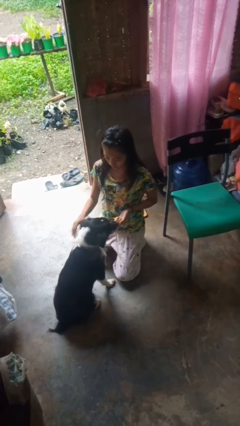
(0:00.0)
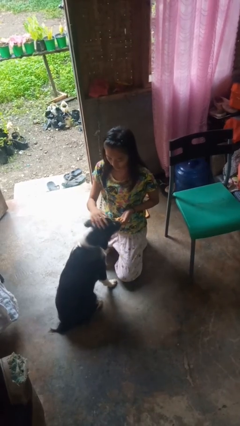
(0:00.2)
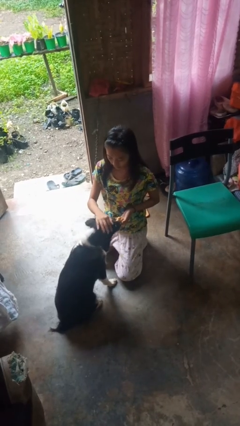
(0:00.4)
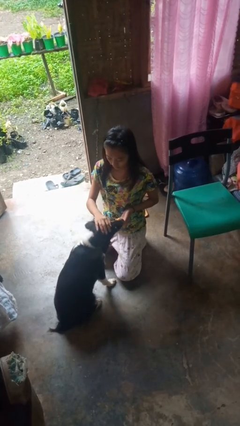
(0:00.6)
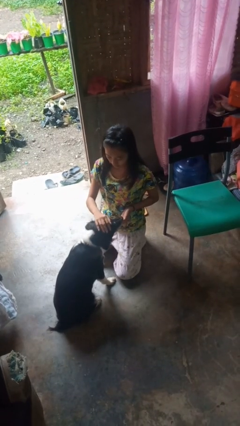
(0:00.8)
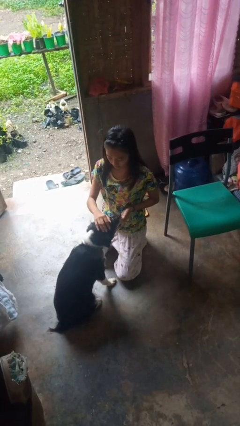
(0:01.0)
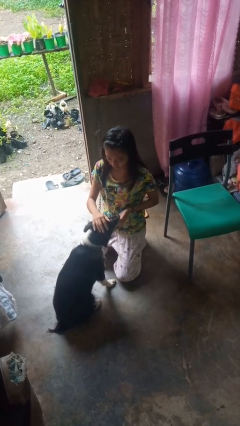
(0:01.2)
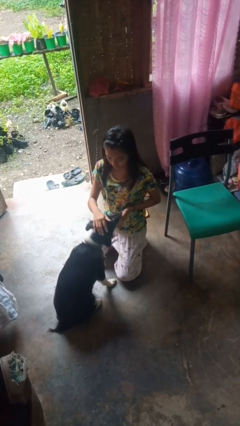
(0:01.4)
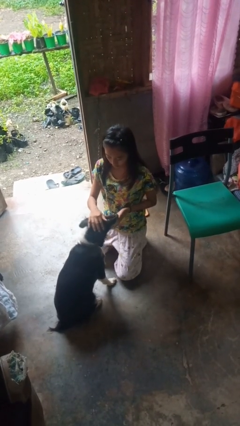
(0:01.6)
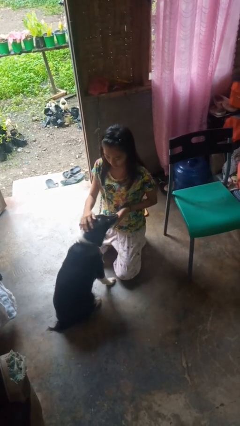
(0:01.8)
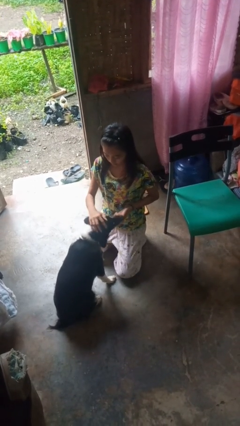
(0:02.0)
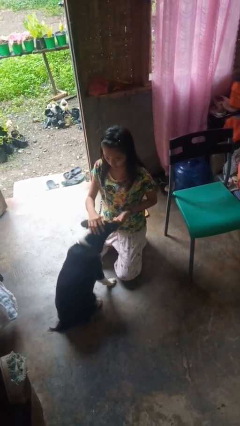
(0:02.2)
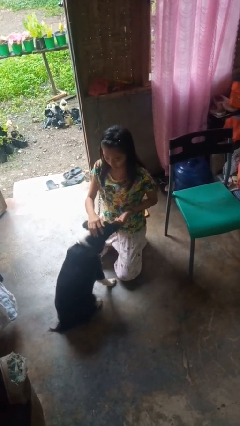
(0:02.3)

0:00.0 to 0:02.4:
person pets dog

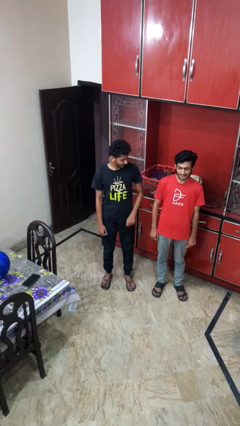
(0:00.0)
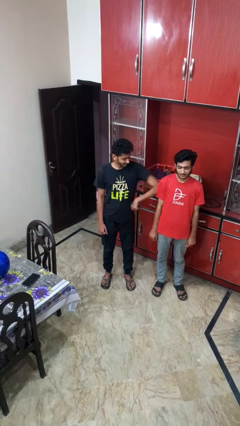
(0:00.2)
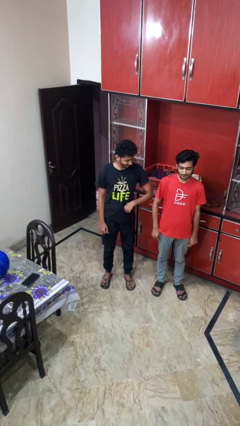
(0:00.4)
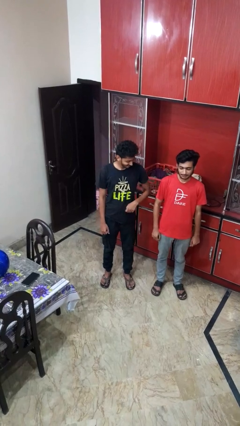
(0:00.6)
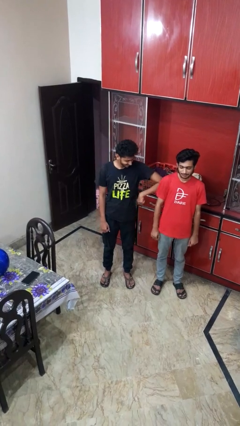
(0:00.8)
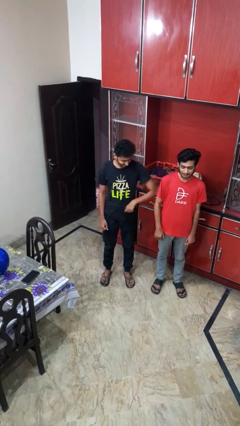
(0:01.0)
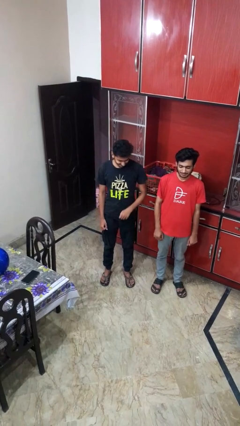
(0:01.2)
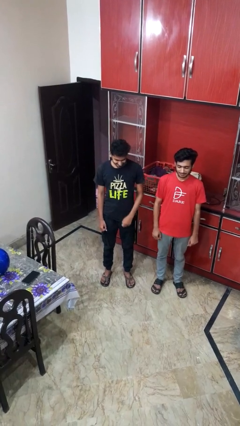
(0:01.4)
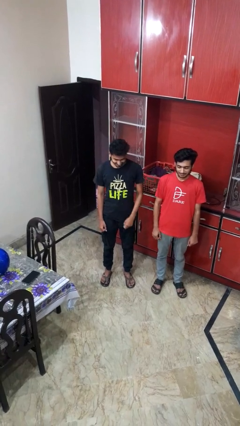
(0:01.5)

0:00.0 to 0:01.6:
person nudges person with elbow

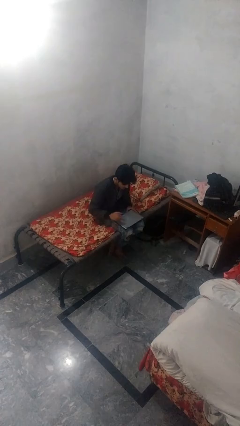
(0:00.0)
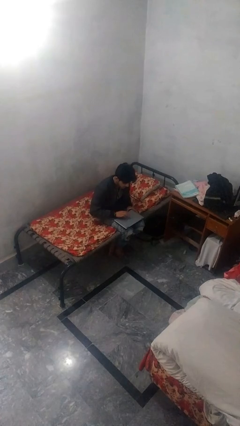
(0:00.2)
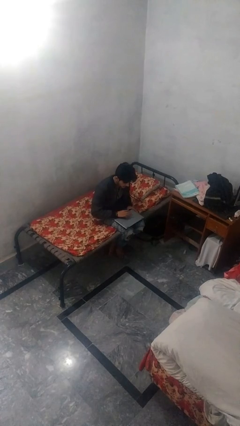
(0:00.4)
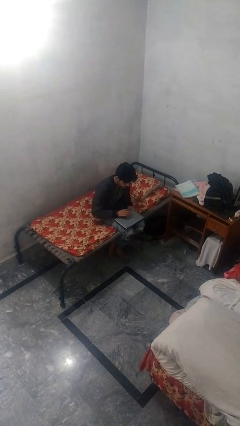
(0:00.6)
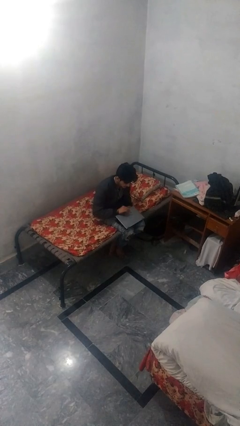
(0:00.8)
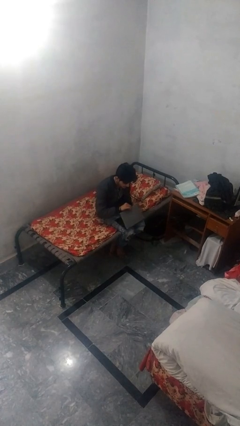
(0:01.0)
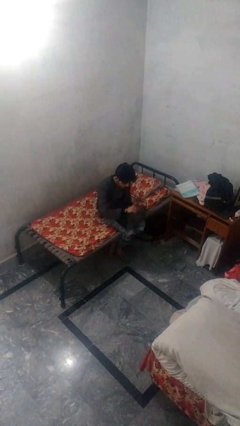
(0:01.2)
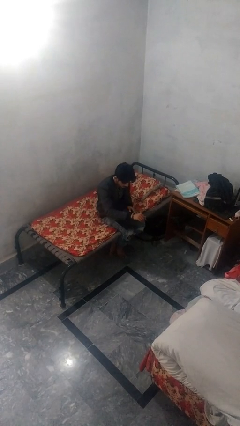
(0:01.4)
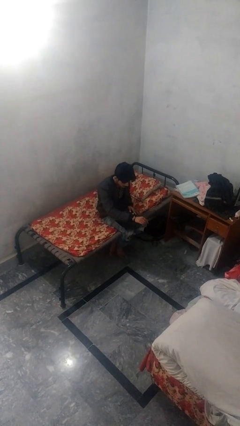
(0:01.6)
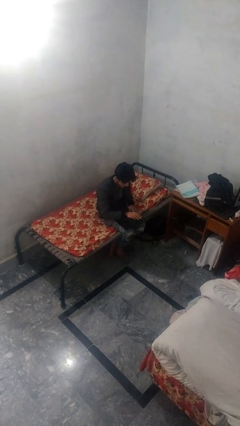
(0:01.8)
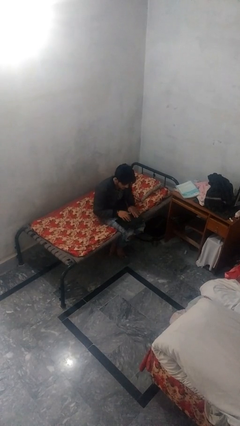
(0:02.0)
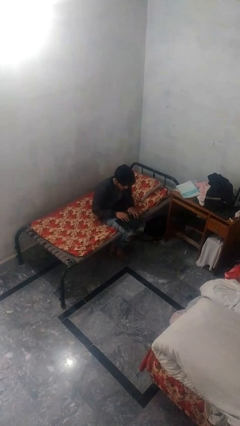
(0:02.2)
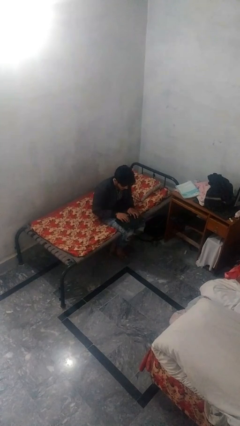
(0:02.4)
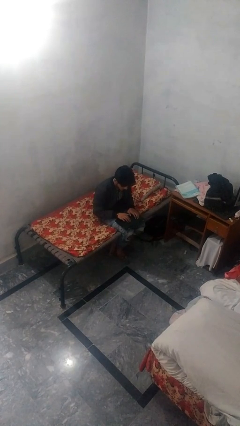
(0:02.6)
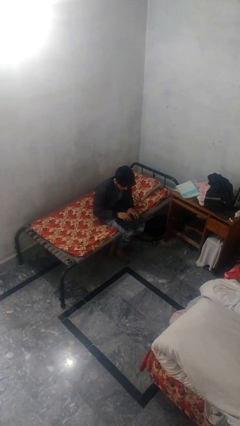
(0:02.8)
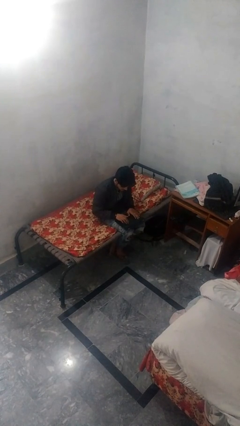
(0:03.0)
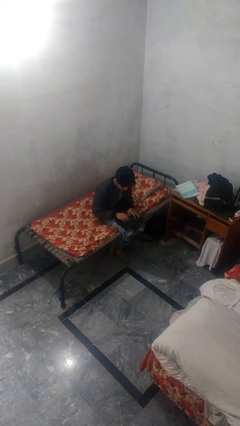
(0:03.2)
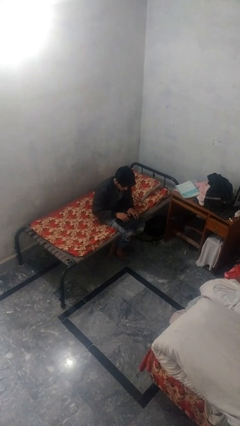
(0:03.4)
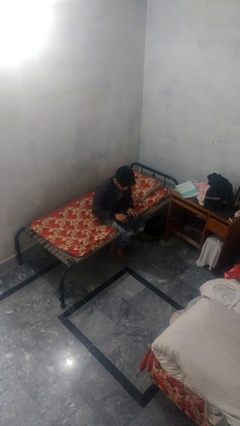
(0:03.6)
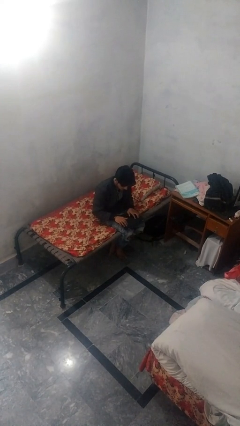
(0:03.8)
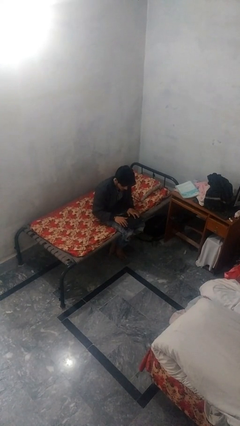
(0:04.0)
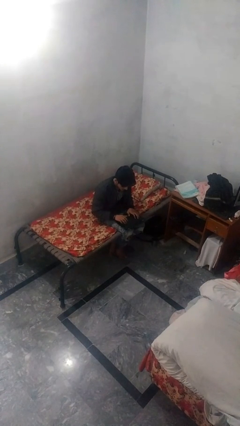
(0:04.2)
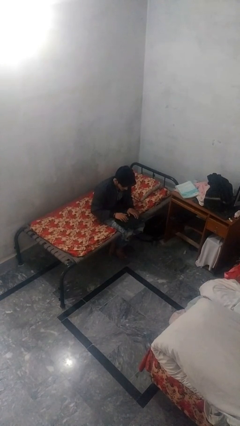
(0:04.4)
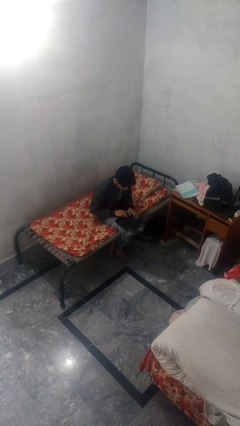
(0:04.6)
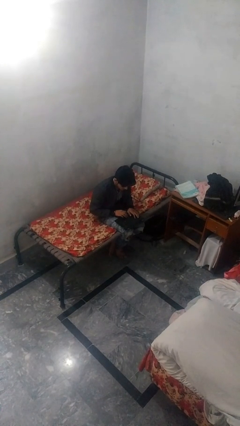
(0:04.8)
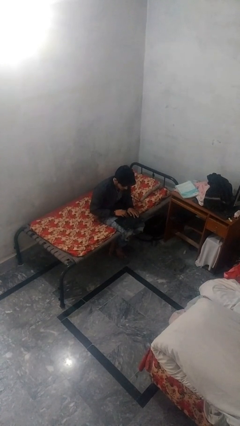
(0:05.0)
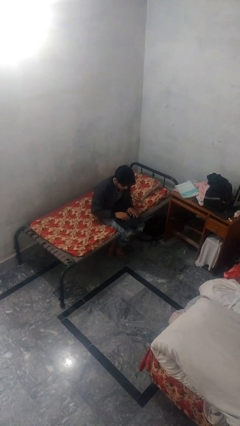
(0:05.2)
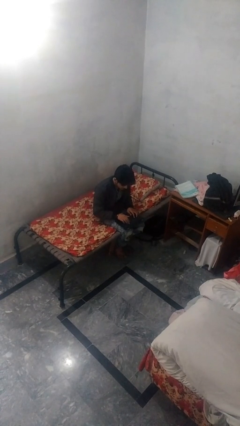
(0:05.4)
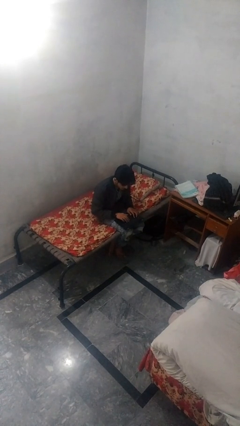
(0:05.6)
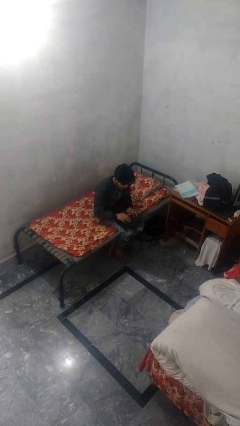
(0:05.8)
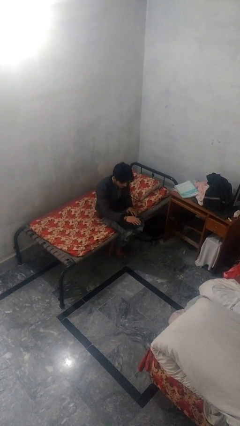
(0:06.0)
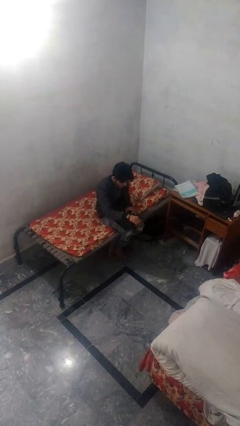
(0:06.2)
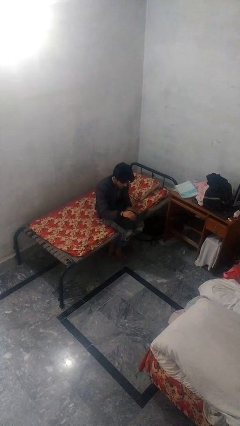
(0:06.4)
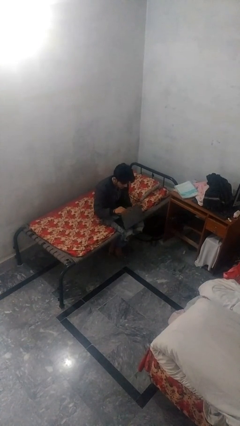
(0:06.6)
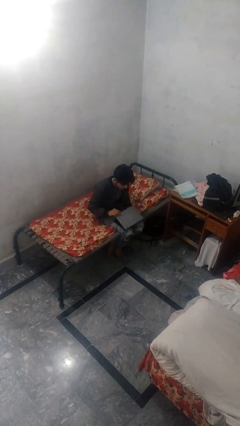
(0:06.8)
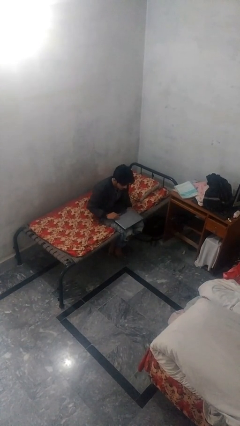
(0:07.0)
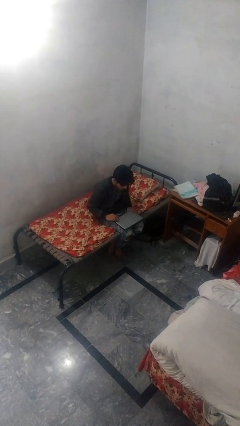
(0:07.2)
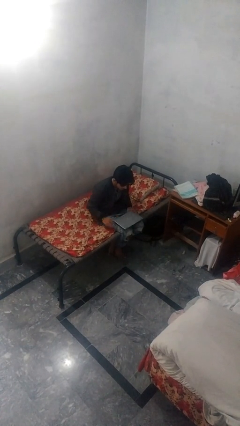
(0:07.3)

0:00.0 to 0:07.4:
person interacts with laptop

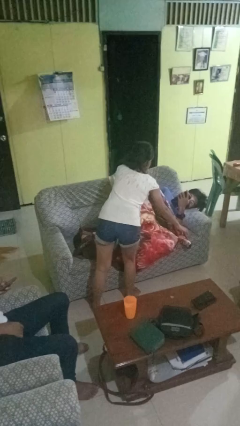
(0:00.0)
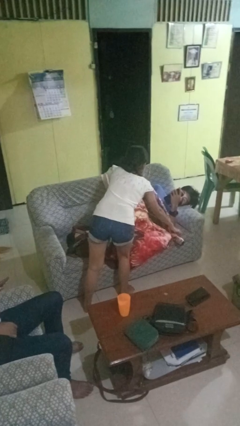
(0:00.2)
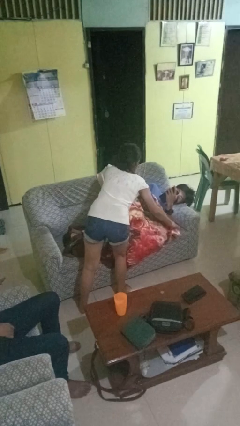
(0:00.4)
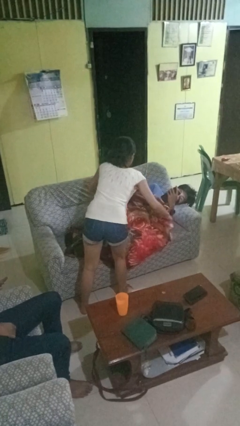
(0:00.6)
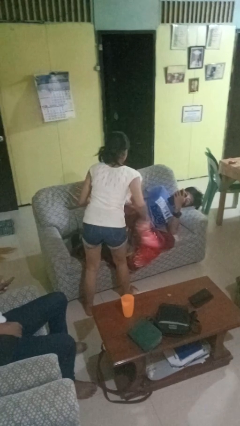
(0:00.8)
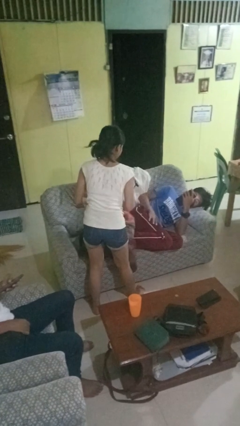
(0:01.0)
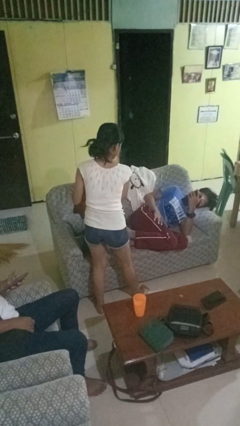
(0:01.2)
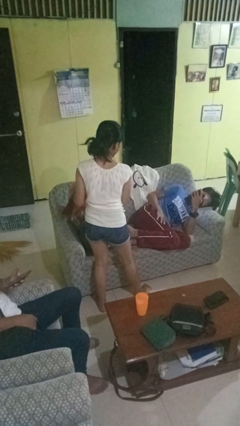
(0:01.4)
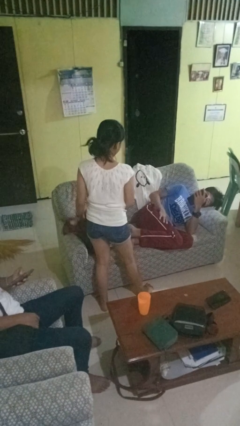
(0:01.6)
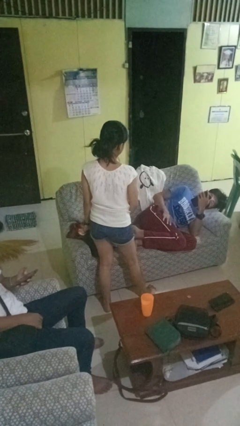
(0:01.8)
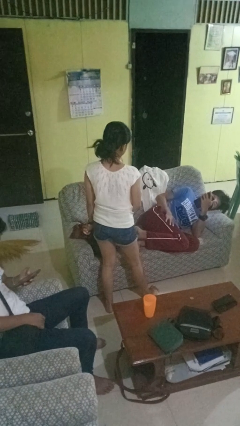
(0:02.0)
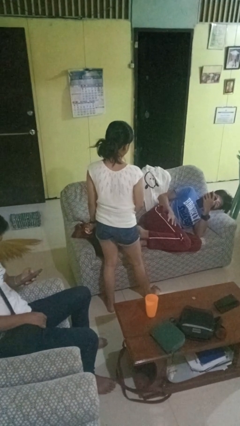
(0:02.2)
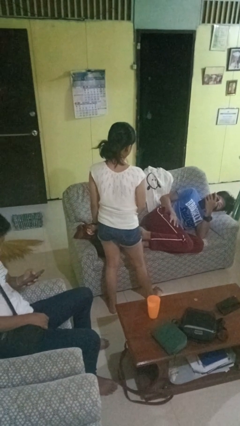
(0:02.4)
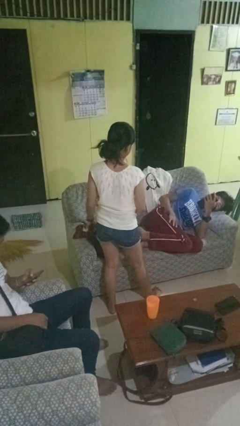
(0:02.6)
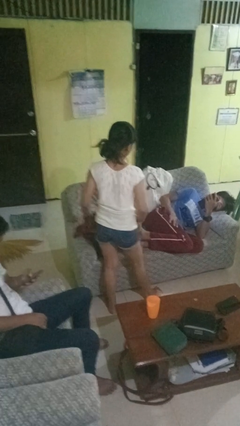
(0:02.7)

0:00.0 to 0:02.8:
person uncovers friend with blanket

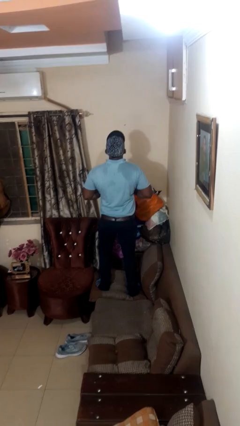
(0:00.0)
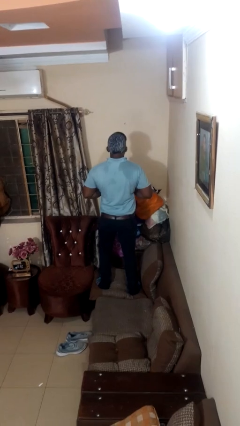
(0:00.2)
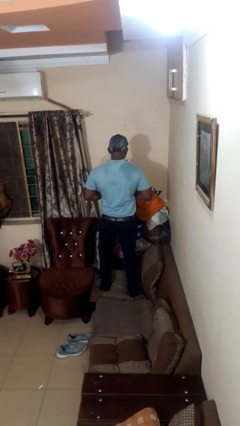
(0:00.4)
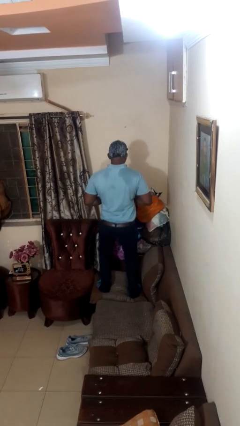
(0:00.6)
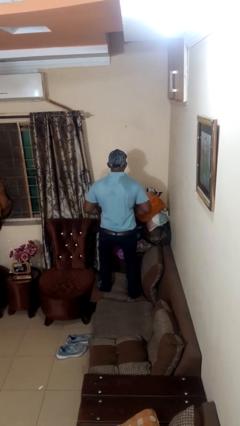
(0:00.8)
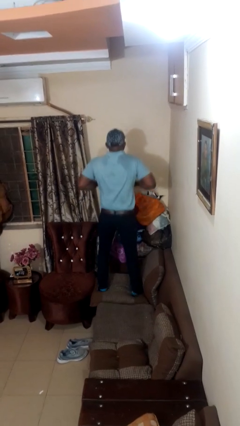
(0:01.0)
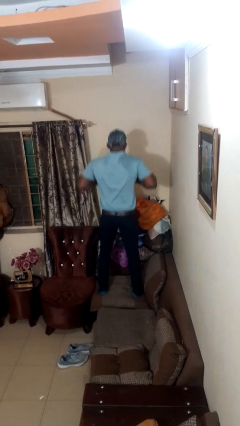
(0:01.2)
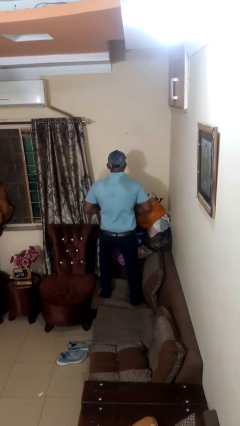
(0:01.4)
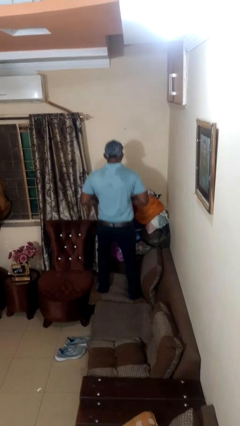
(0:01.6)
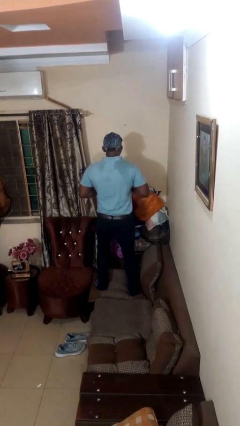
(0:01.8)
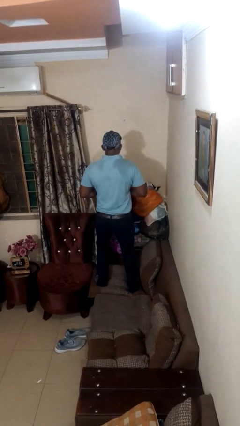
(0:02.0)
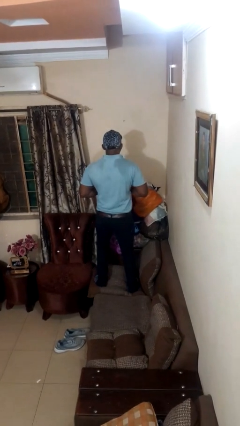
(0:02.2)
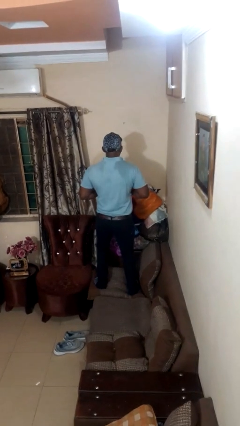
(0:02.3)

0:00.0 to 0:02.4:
person jumps on couch

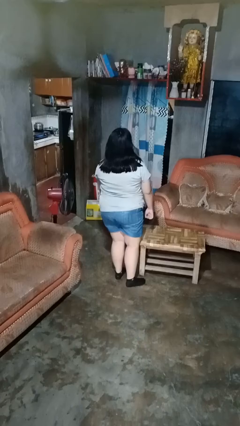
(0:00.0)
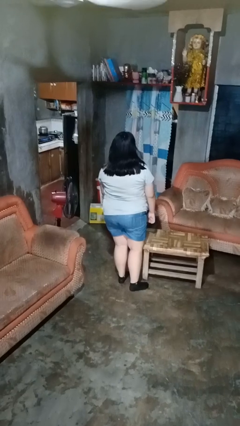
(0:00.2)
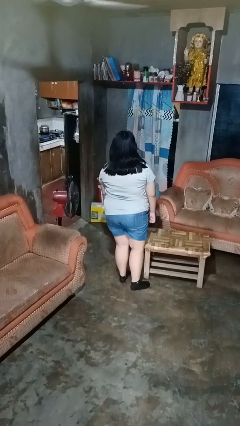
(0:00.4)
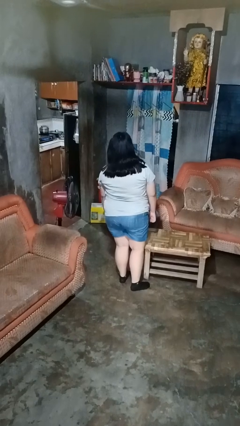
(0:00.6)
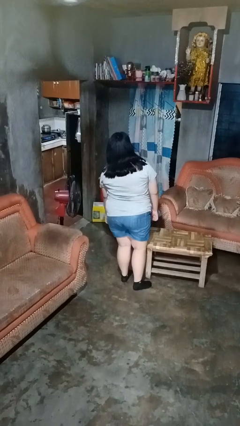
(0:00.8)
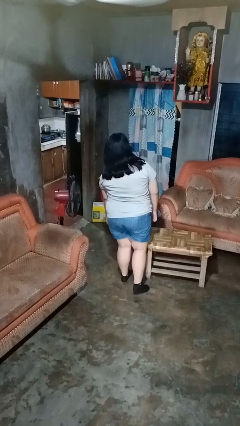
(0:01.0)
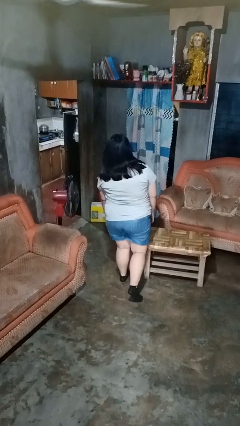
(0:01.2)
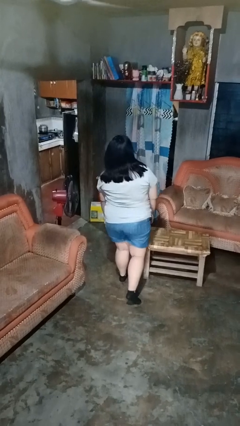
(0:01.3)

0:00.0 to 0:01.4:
person bumps into table
